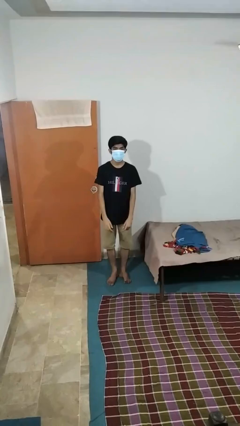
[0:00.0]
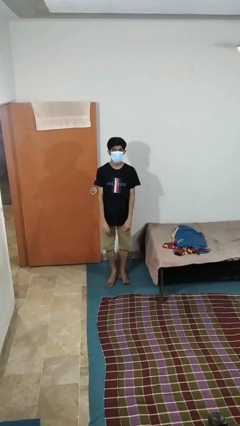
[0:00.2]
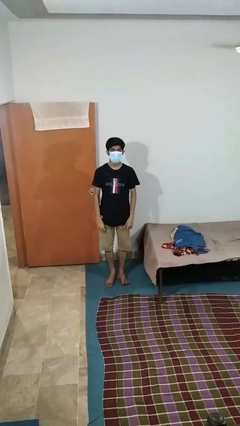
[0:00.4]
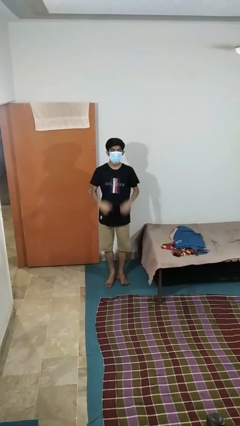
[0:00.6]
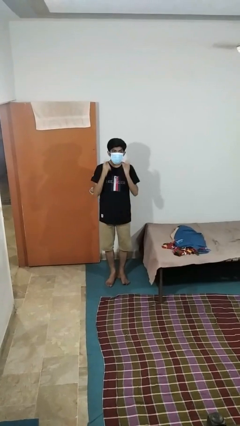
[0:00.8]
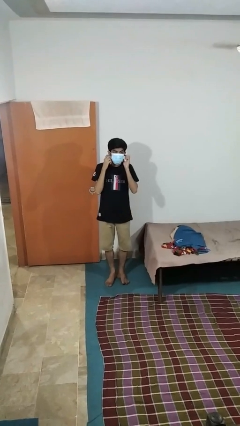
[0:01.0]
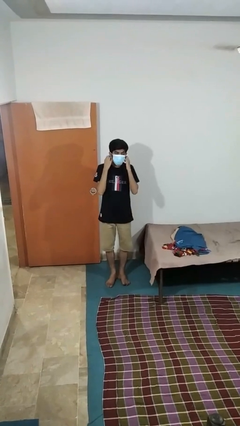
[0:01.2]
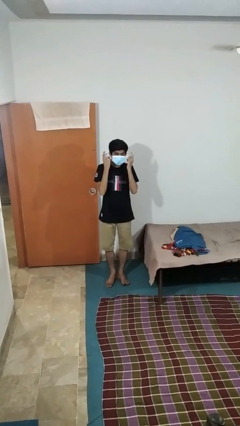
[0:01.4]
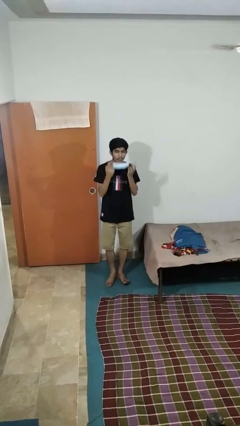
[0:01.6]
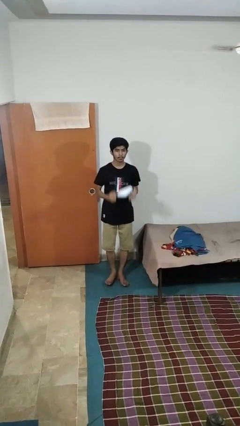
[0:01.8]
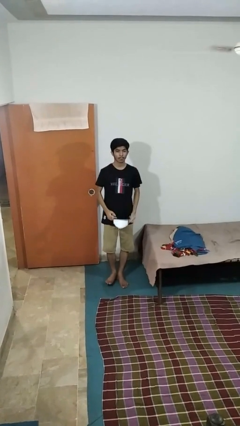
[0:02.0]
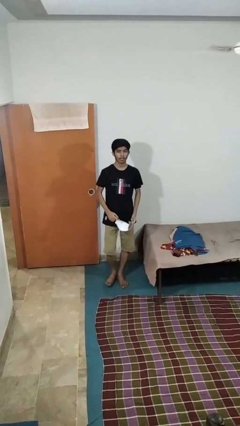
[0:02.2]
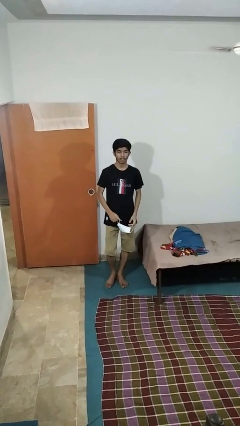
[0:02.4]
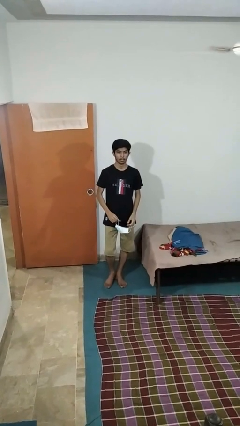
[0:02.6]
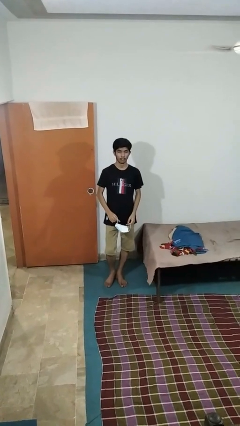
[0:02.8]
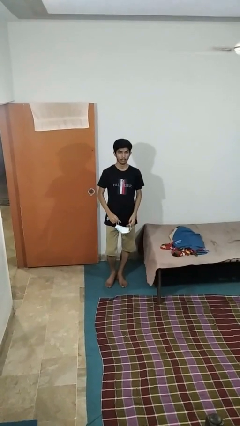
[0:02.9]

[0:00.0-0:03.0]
person takes off facemask

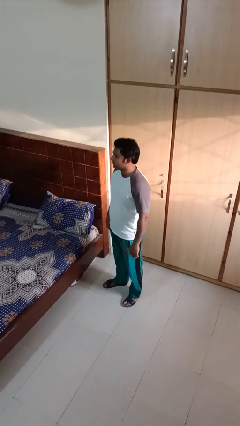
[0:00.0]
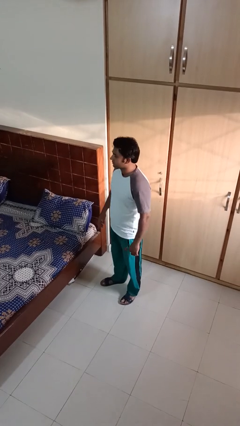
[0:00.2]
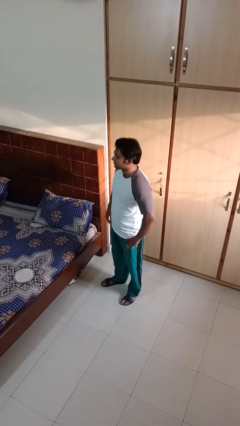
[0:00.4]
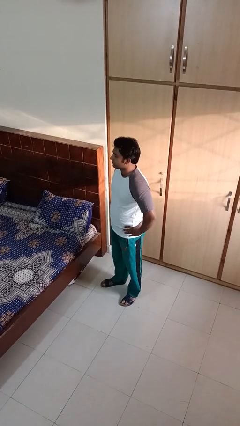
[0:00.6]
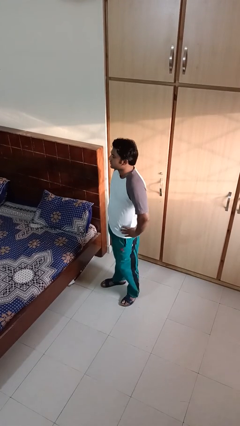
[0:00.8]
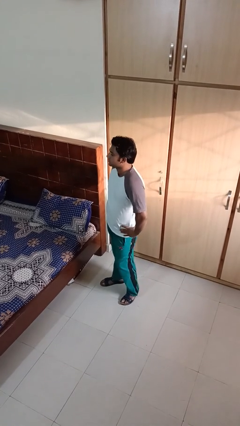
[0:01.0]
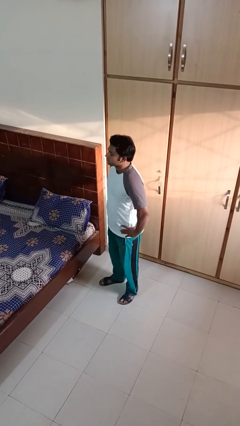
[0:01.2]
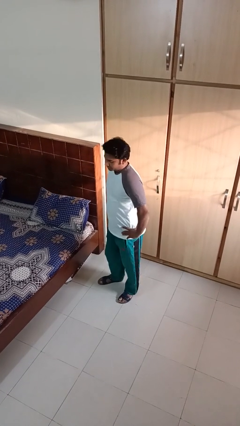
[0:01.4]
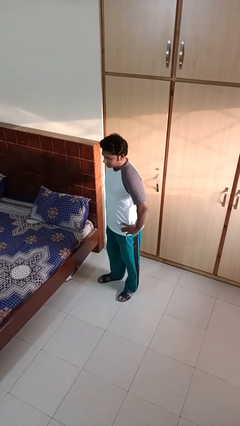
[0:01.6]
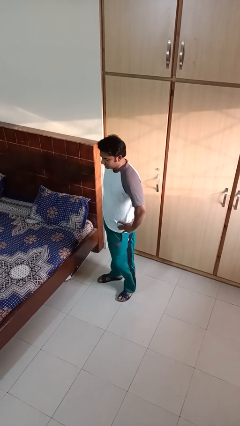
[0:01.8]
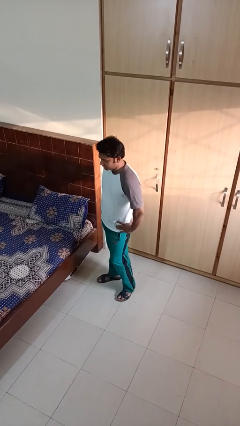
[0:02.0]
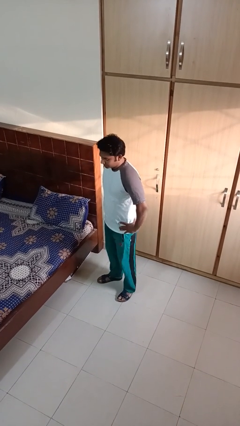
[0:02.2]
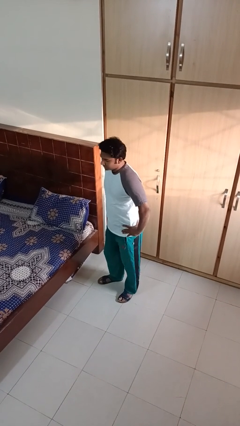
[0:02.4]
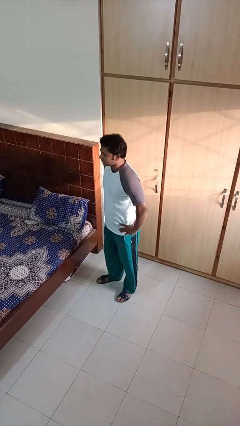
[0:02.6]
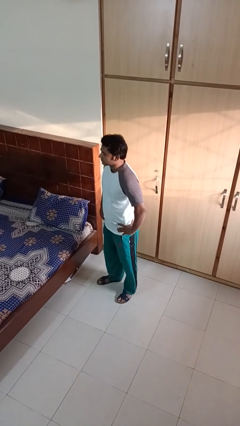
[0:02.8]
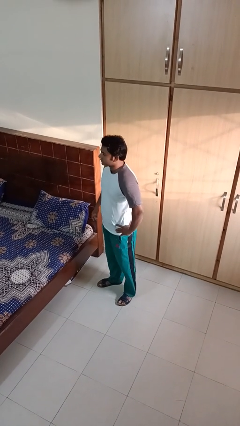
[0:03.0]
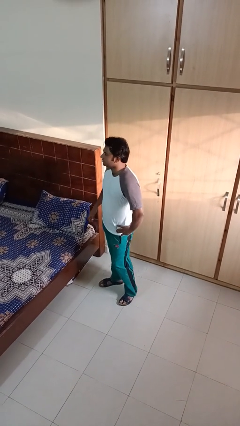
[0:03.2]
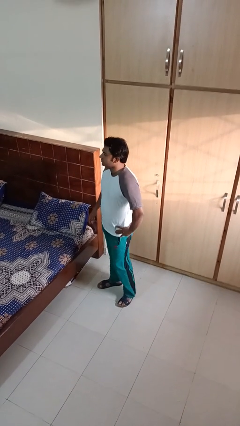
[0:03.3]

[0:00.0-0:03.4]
person wiggles hips

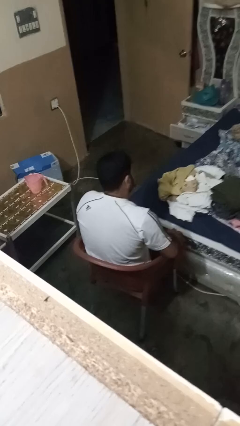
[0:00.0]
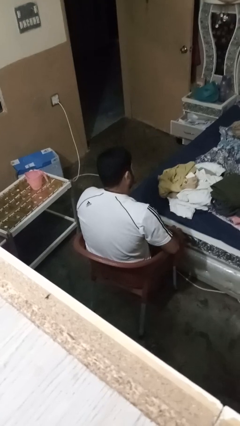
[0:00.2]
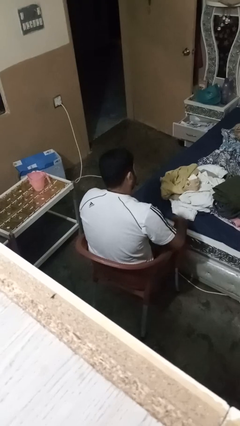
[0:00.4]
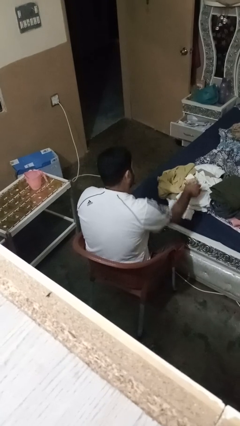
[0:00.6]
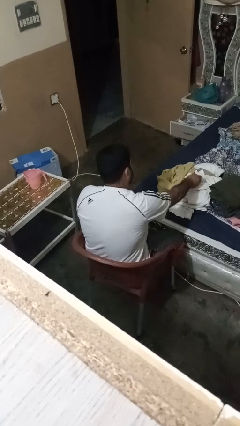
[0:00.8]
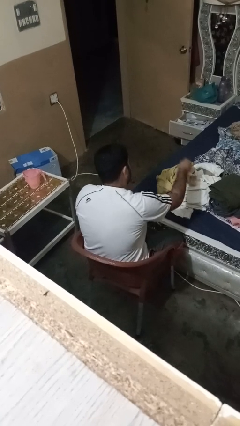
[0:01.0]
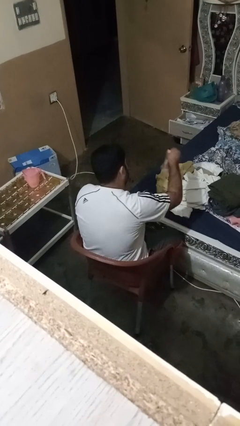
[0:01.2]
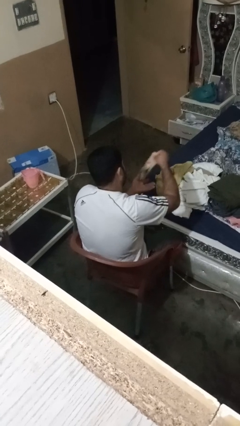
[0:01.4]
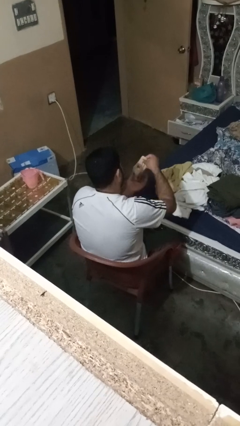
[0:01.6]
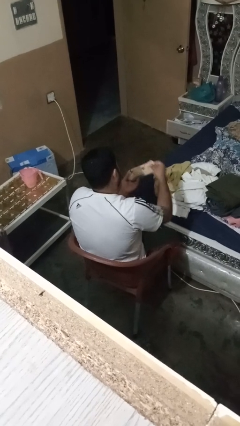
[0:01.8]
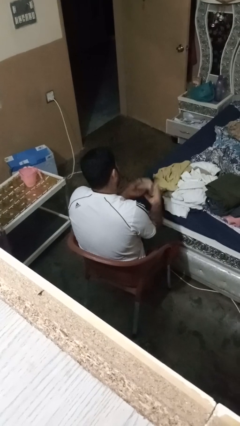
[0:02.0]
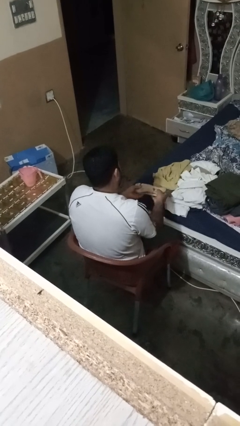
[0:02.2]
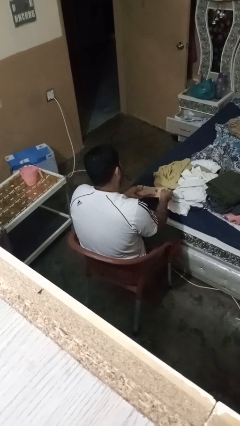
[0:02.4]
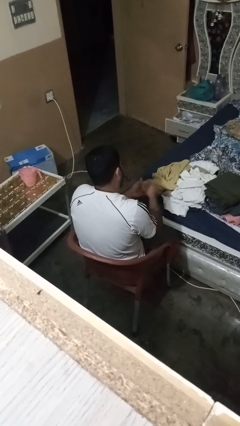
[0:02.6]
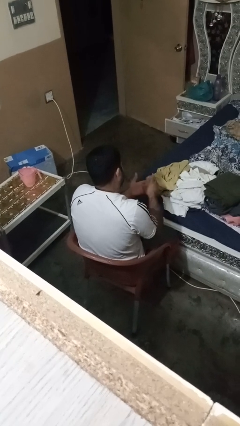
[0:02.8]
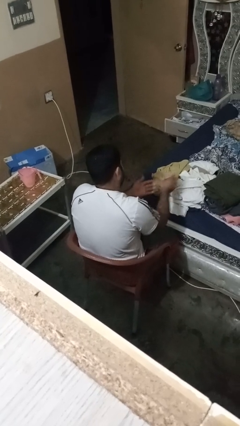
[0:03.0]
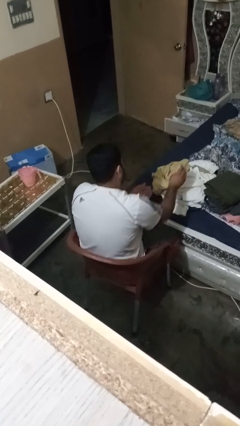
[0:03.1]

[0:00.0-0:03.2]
person folds socks

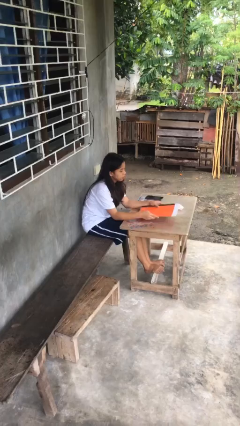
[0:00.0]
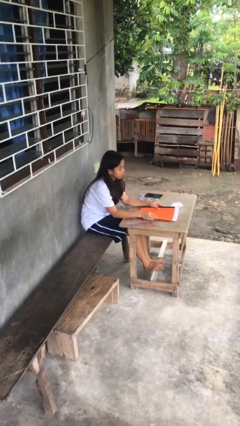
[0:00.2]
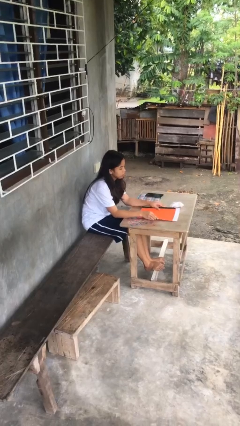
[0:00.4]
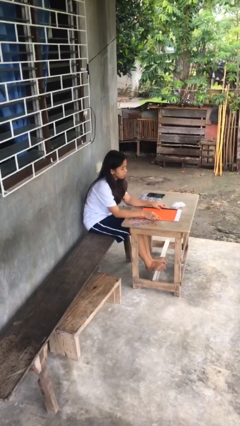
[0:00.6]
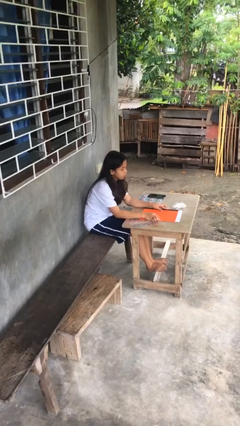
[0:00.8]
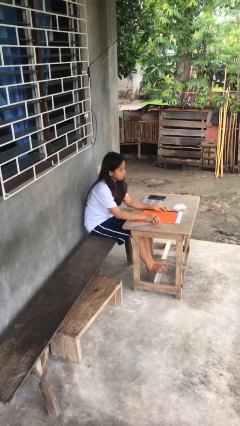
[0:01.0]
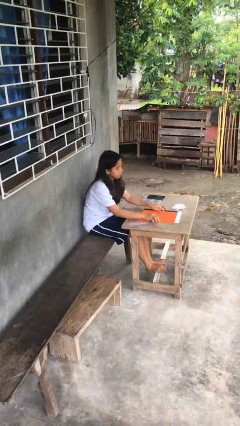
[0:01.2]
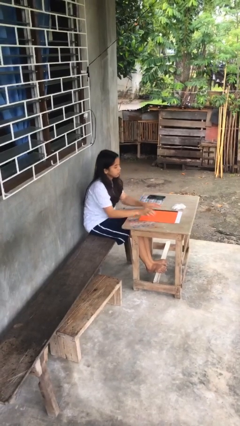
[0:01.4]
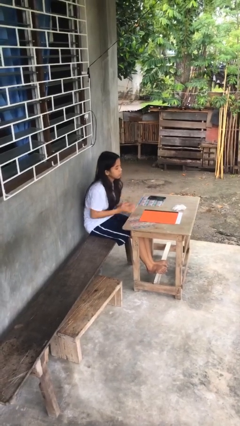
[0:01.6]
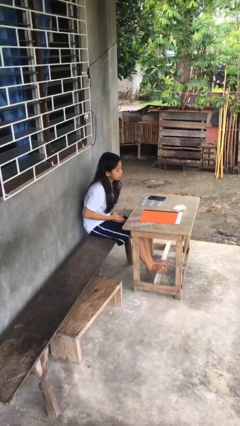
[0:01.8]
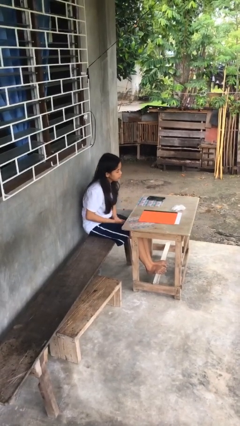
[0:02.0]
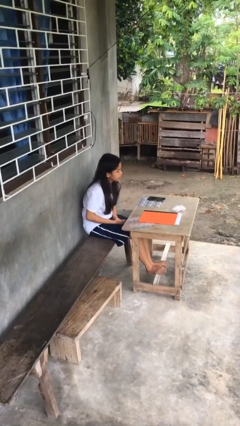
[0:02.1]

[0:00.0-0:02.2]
person puts down object on table

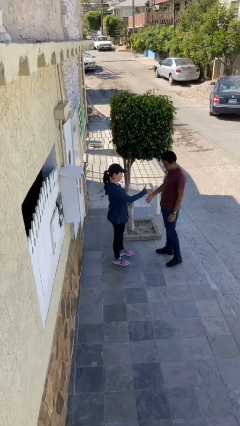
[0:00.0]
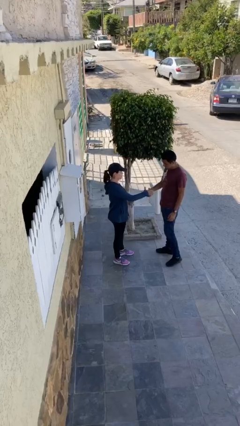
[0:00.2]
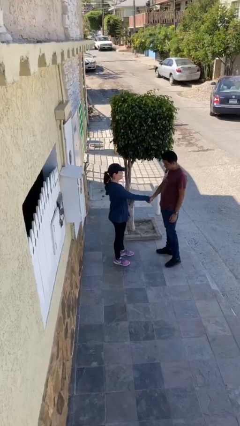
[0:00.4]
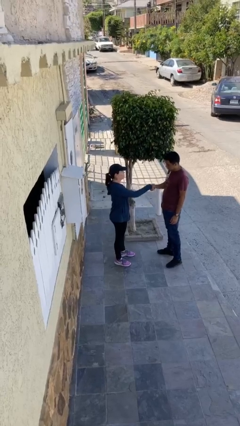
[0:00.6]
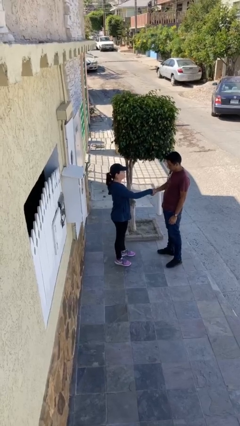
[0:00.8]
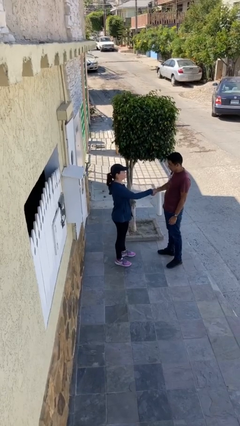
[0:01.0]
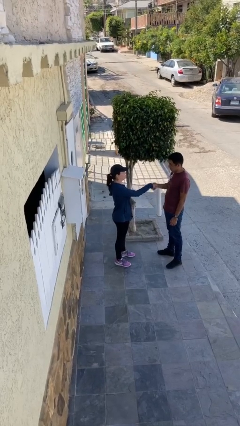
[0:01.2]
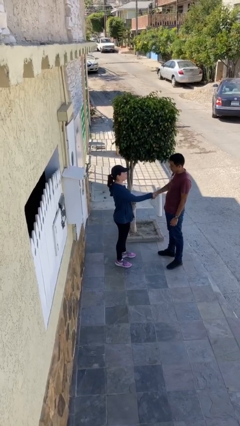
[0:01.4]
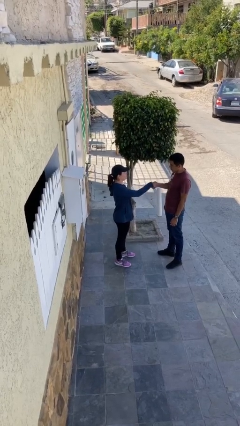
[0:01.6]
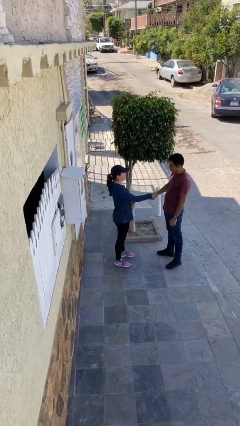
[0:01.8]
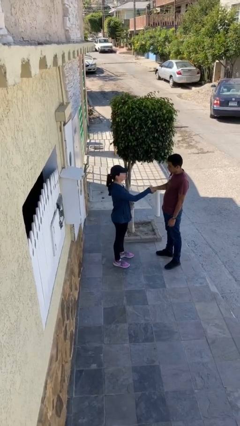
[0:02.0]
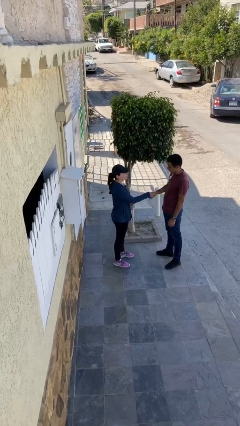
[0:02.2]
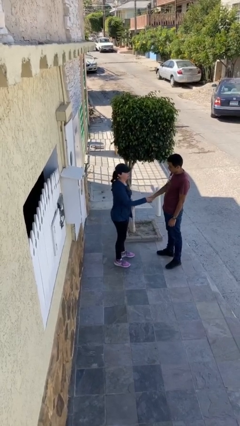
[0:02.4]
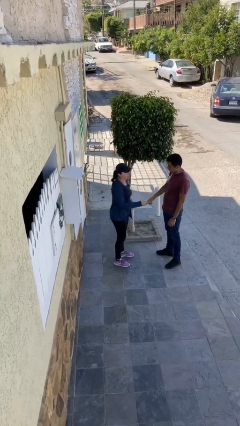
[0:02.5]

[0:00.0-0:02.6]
person shakes hand

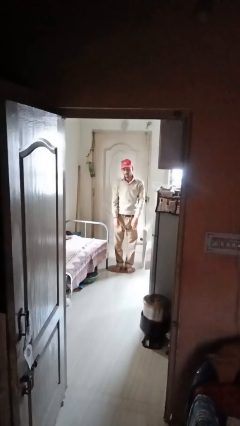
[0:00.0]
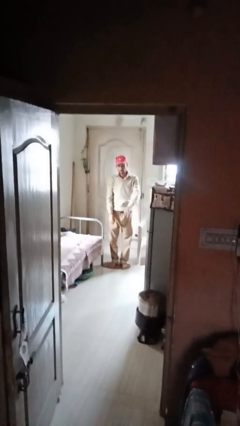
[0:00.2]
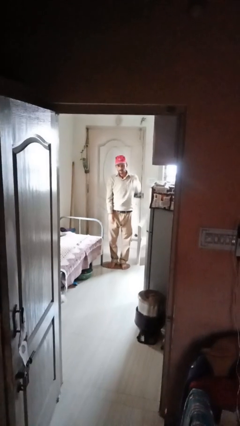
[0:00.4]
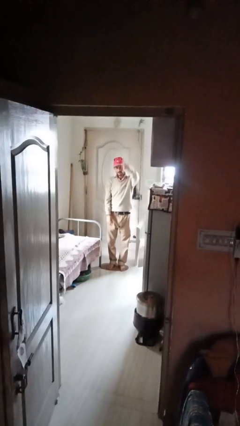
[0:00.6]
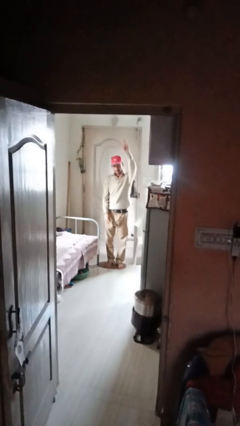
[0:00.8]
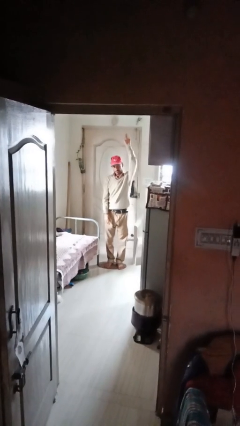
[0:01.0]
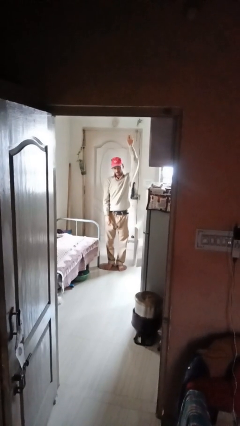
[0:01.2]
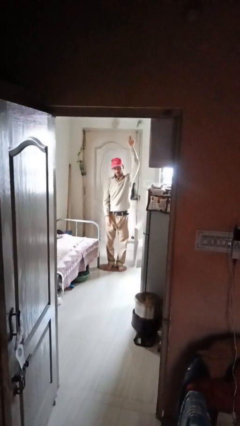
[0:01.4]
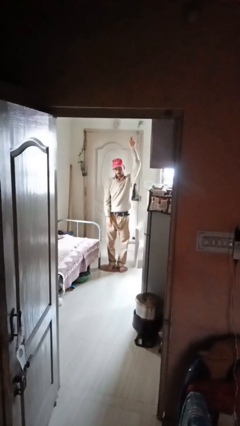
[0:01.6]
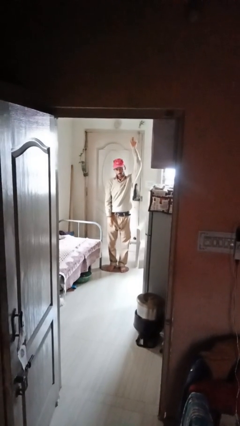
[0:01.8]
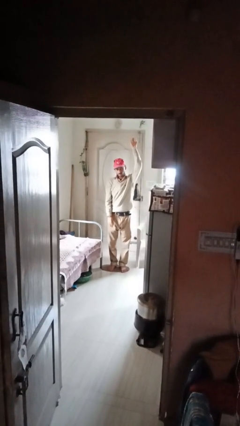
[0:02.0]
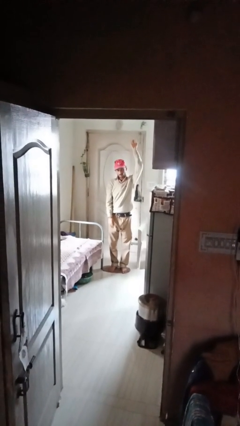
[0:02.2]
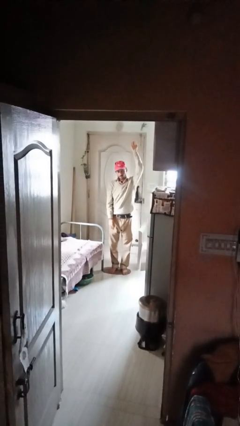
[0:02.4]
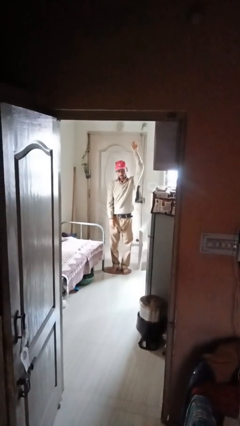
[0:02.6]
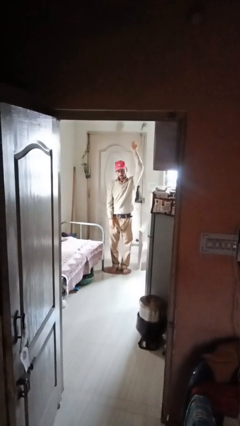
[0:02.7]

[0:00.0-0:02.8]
person gestures swipe up
